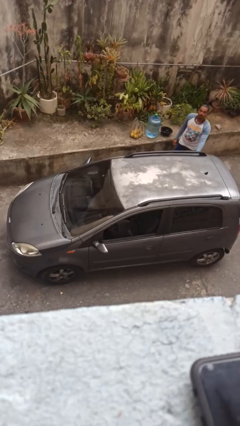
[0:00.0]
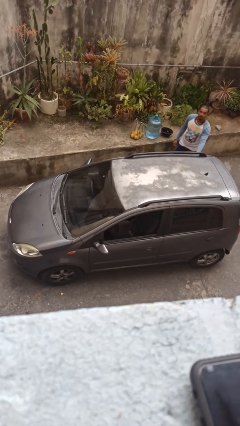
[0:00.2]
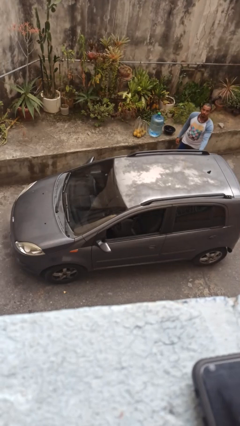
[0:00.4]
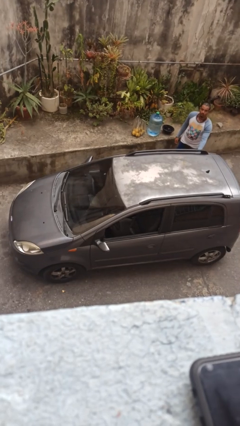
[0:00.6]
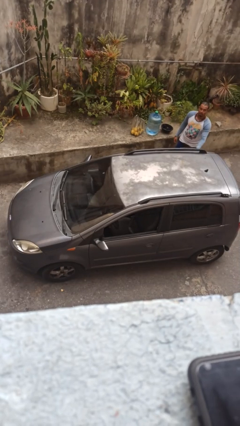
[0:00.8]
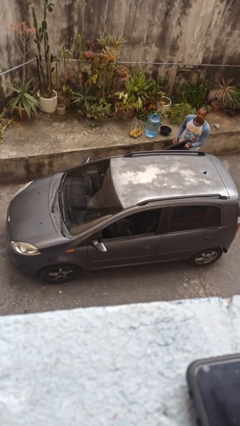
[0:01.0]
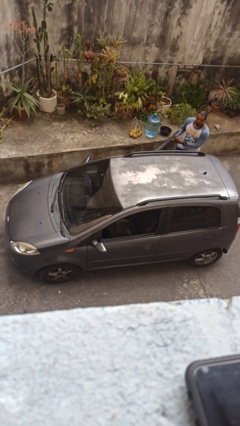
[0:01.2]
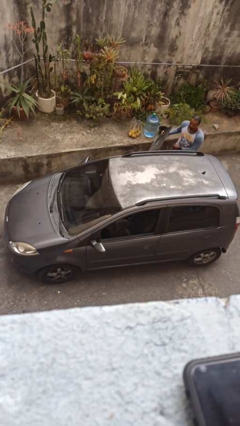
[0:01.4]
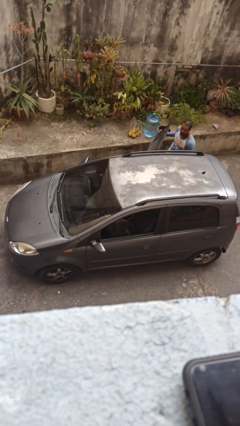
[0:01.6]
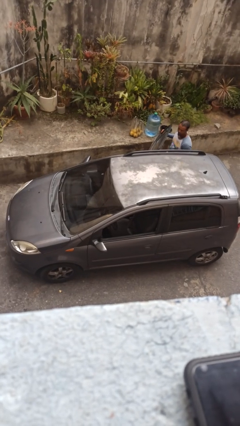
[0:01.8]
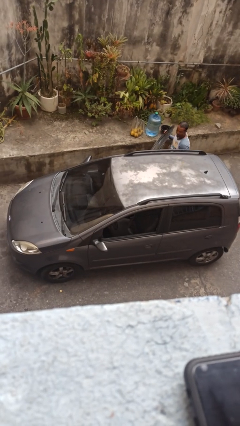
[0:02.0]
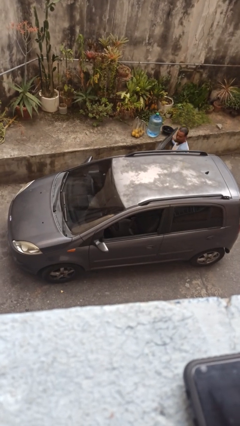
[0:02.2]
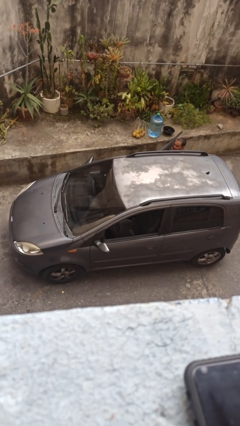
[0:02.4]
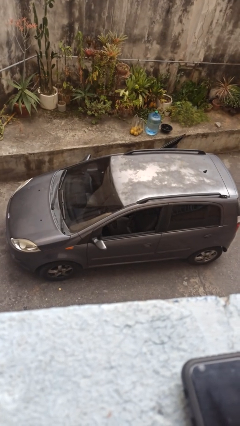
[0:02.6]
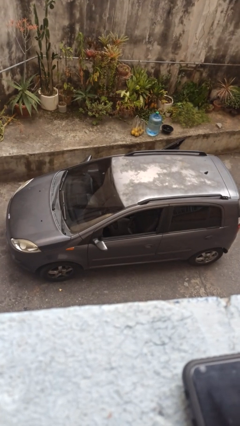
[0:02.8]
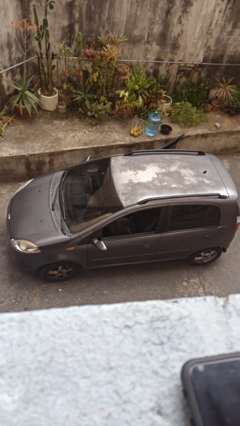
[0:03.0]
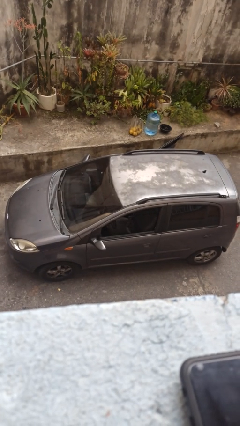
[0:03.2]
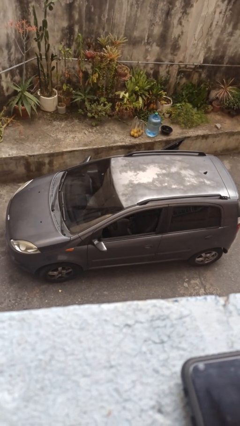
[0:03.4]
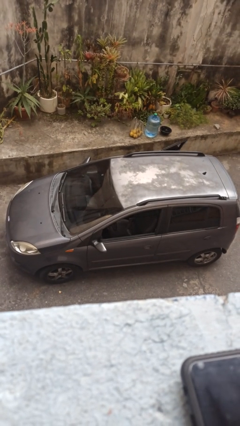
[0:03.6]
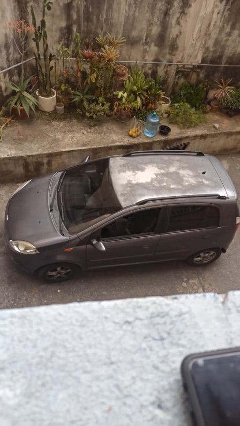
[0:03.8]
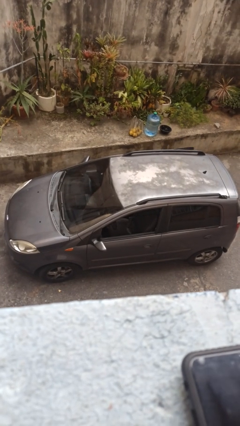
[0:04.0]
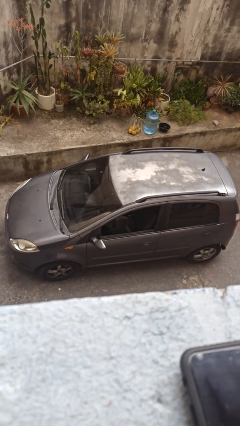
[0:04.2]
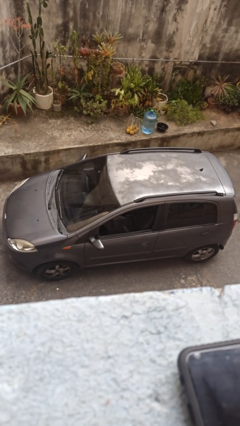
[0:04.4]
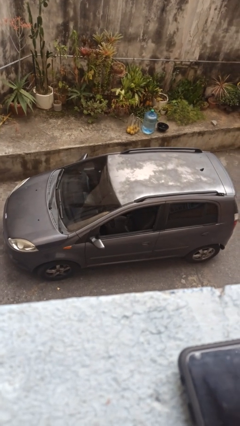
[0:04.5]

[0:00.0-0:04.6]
car picks up person

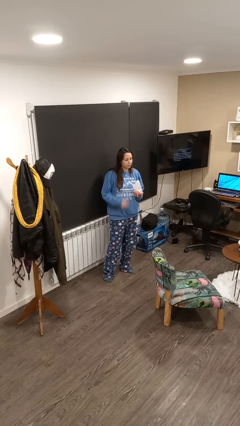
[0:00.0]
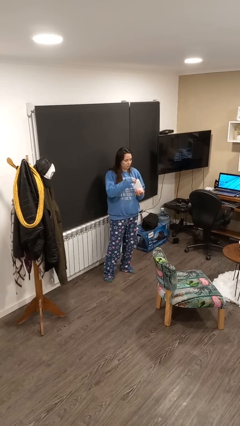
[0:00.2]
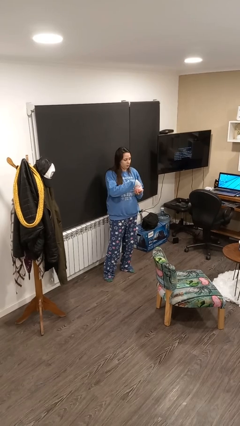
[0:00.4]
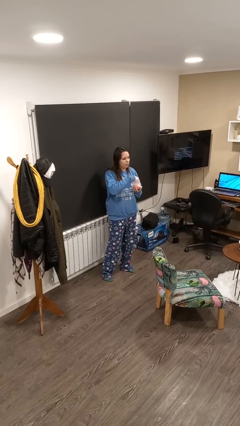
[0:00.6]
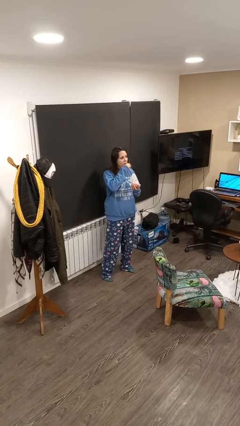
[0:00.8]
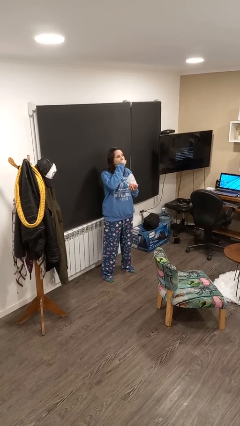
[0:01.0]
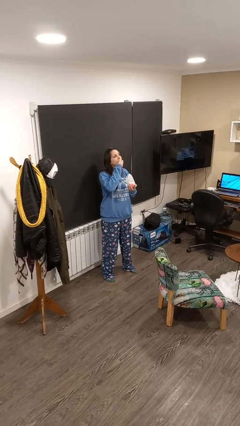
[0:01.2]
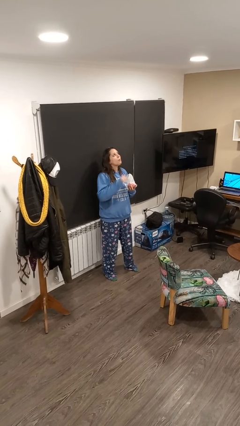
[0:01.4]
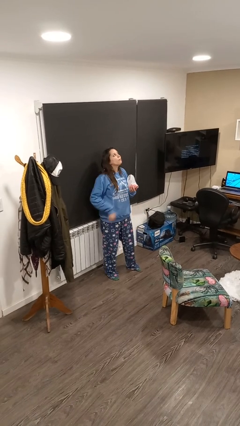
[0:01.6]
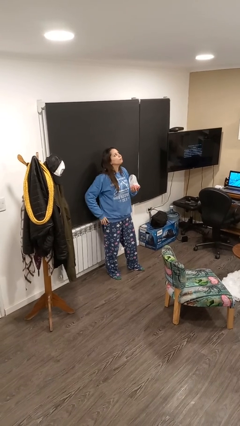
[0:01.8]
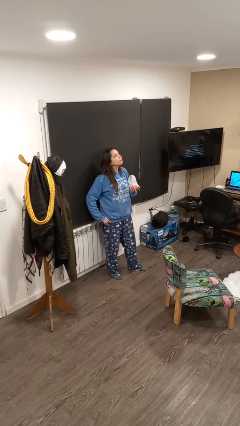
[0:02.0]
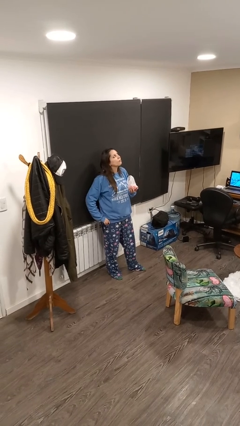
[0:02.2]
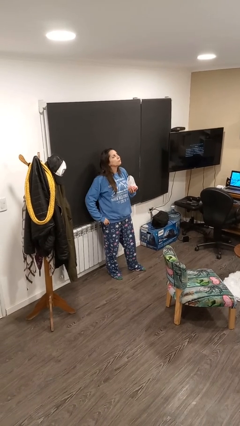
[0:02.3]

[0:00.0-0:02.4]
person eats snack from bag

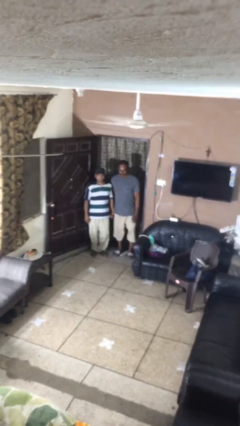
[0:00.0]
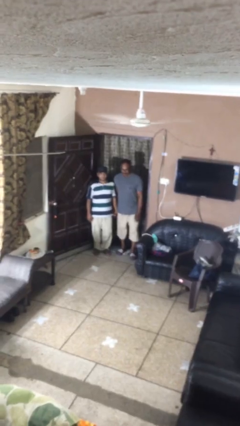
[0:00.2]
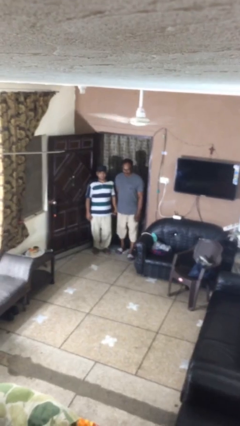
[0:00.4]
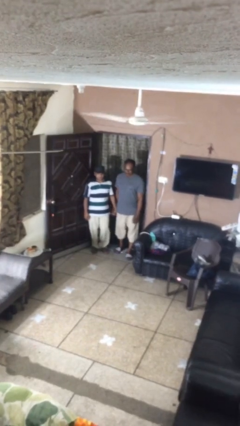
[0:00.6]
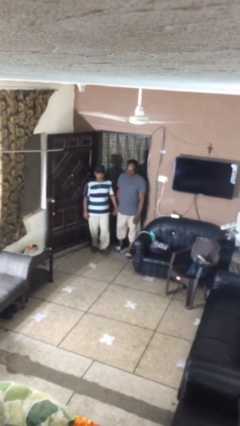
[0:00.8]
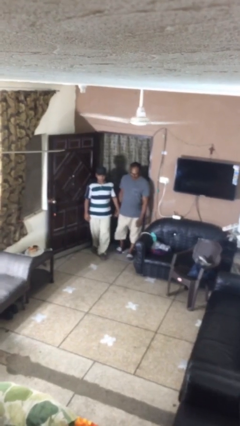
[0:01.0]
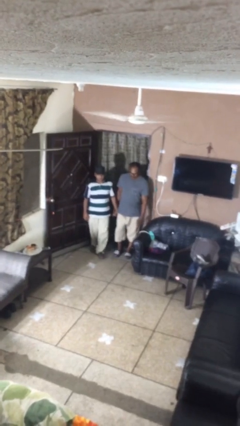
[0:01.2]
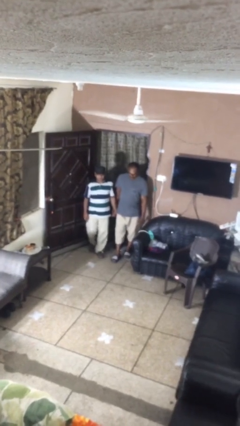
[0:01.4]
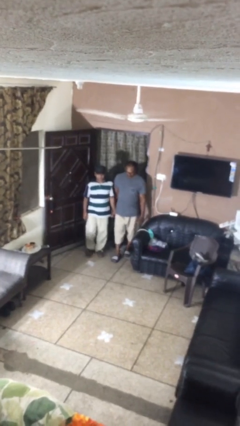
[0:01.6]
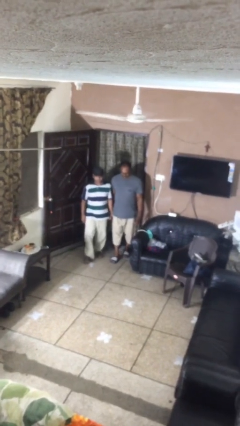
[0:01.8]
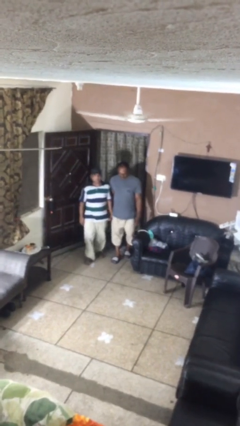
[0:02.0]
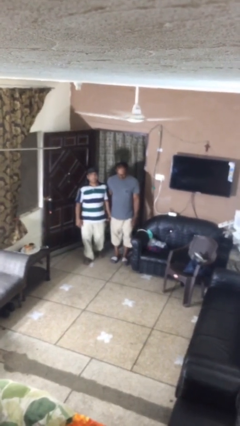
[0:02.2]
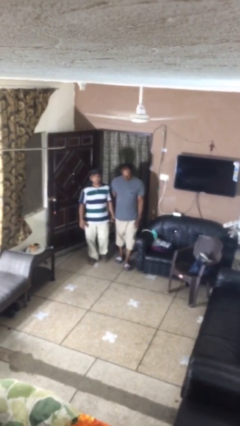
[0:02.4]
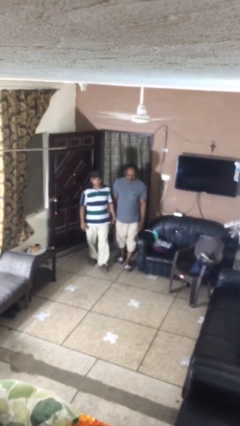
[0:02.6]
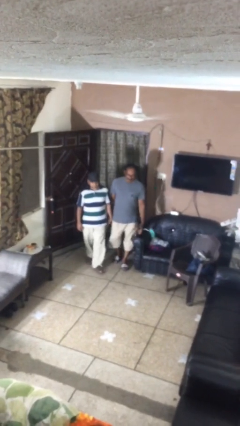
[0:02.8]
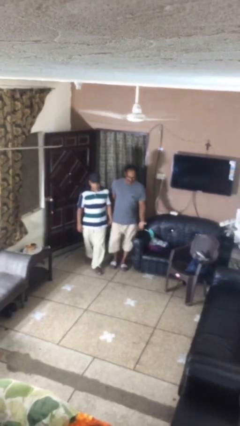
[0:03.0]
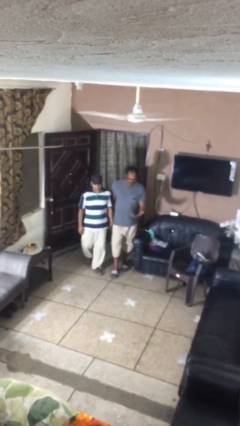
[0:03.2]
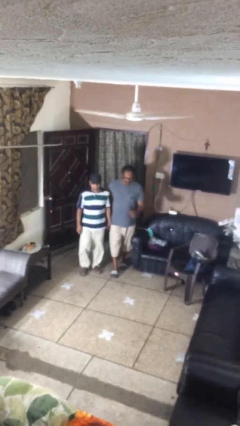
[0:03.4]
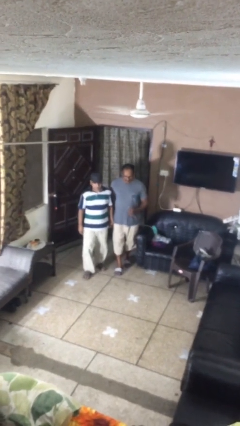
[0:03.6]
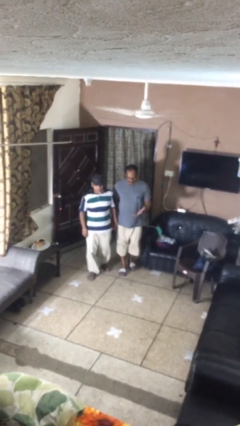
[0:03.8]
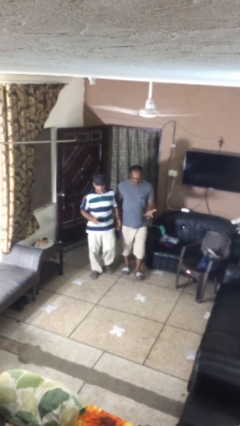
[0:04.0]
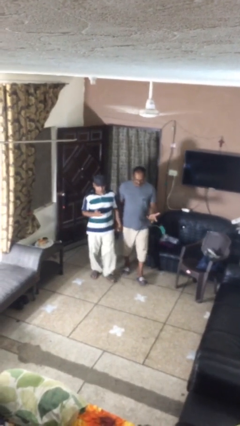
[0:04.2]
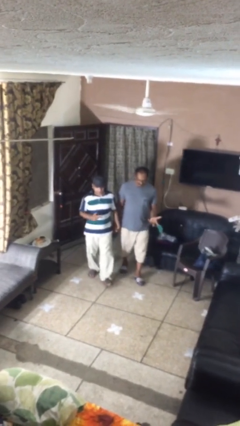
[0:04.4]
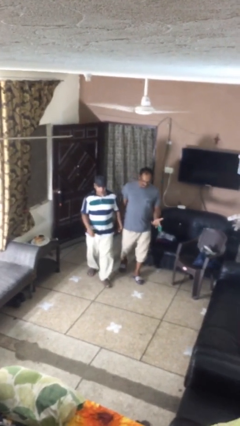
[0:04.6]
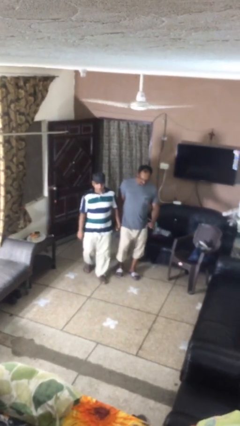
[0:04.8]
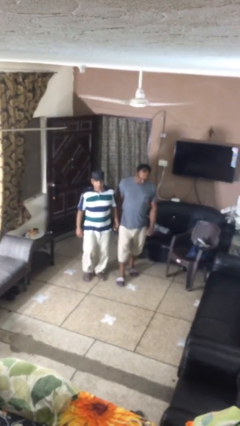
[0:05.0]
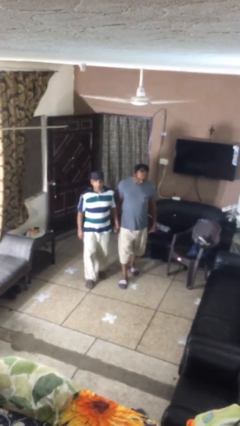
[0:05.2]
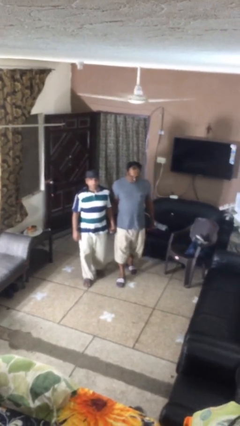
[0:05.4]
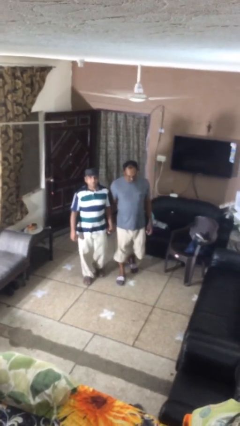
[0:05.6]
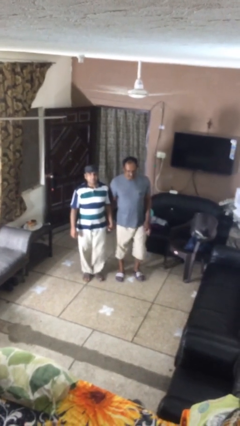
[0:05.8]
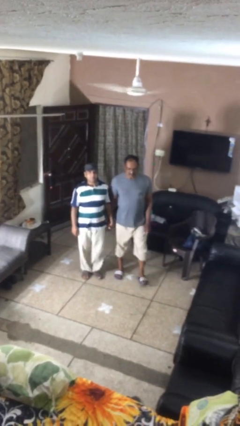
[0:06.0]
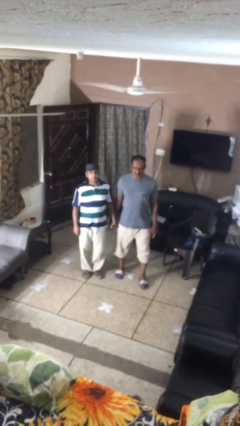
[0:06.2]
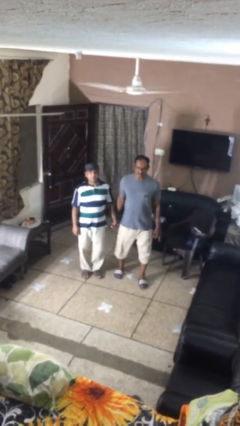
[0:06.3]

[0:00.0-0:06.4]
person holds hand

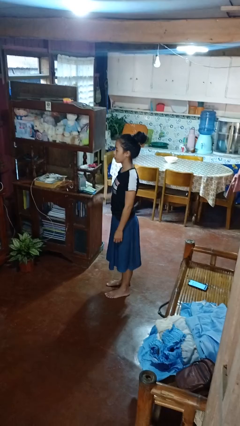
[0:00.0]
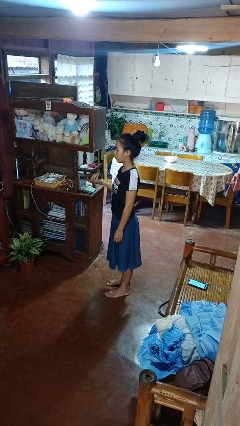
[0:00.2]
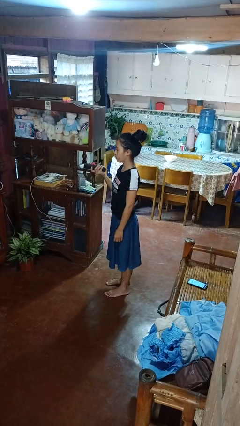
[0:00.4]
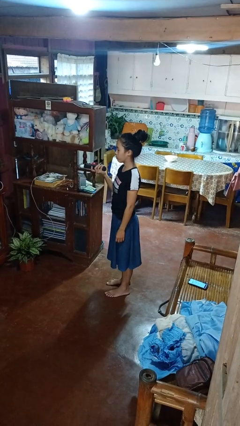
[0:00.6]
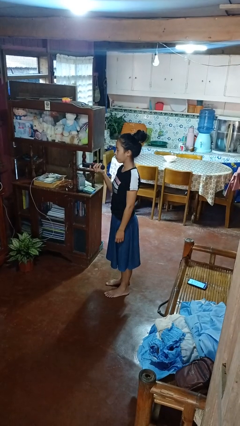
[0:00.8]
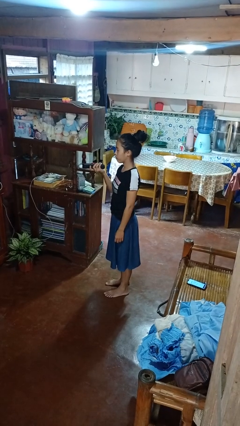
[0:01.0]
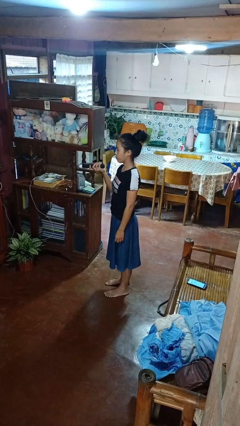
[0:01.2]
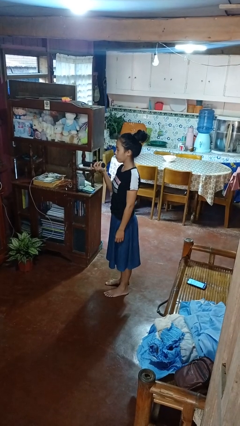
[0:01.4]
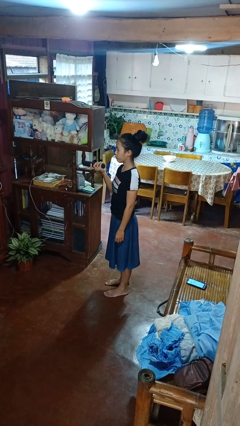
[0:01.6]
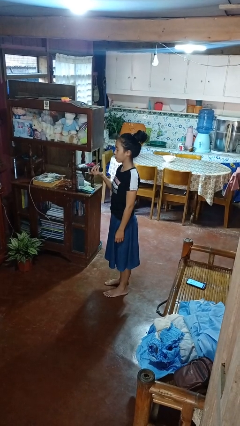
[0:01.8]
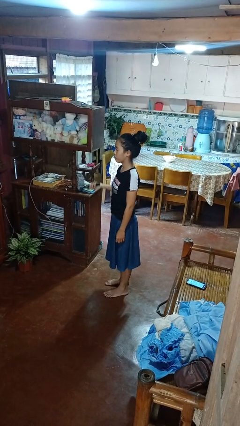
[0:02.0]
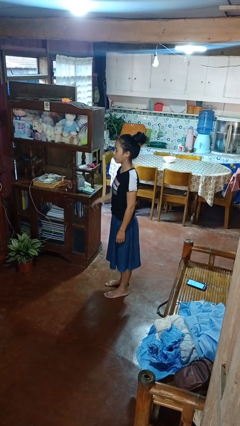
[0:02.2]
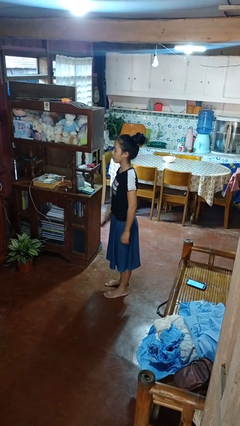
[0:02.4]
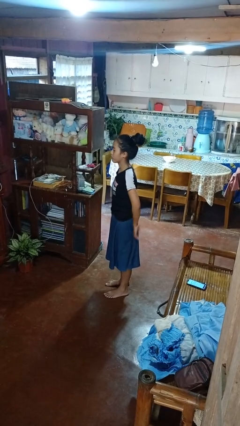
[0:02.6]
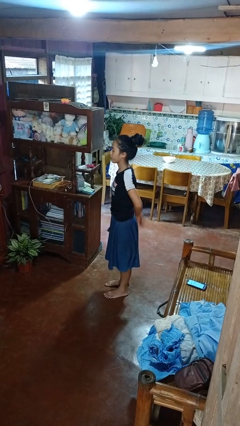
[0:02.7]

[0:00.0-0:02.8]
person uses television remote

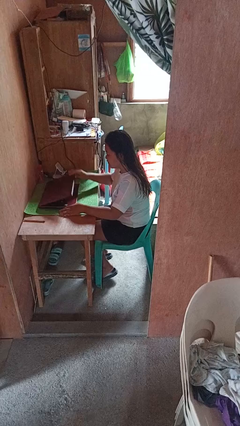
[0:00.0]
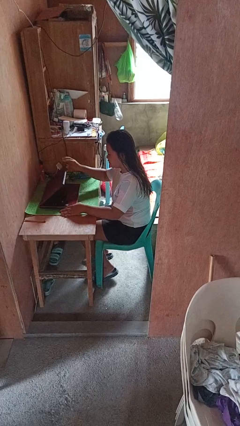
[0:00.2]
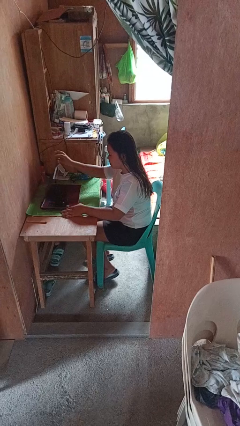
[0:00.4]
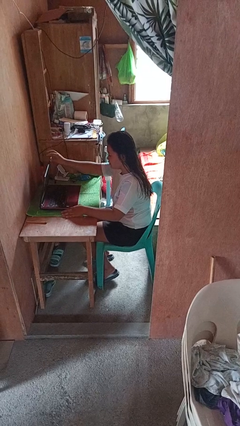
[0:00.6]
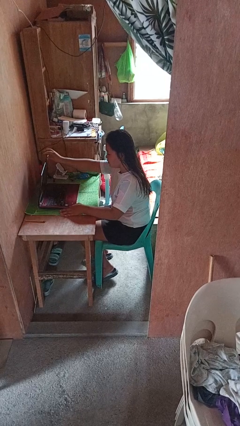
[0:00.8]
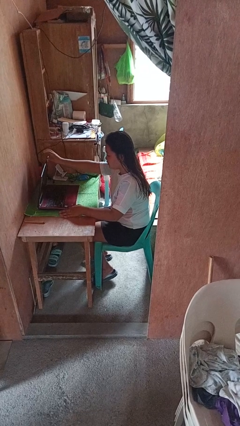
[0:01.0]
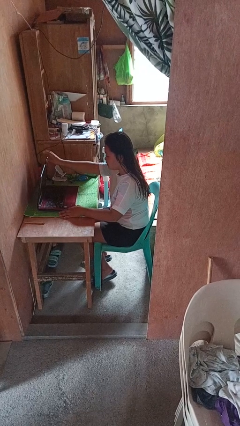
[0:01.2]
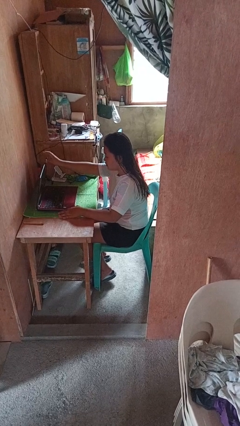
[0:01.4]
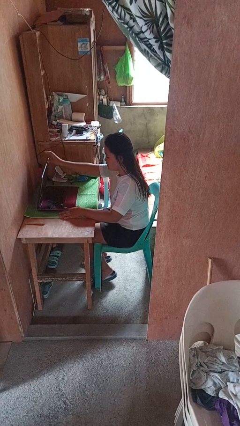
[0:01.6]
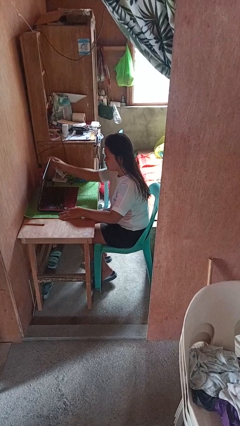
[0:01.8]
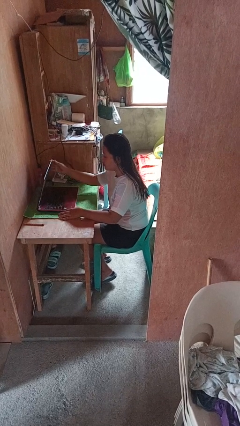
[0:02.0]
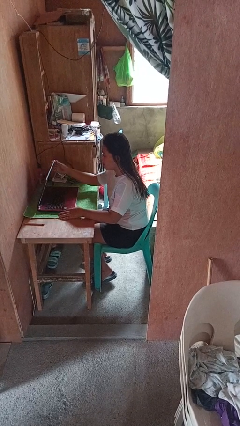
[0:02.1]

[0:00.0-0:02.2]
person opens laptop
